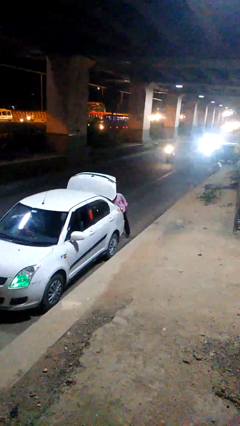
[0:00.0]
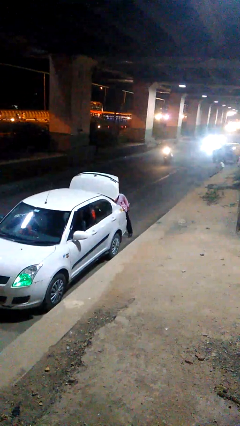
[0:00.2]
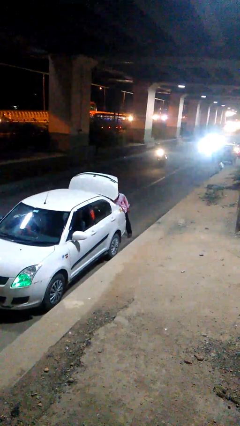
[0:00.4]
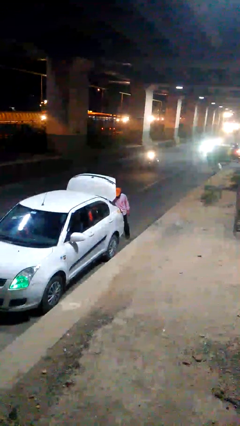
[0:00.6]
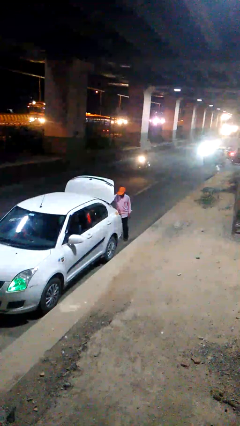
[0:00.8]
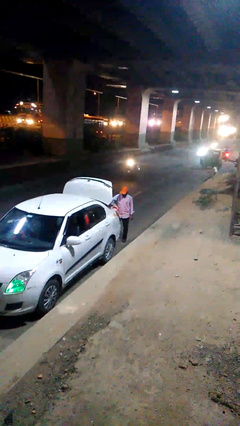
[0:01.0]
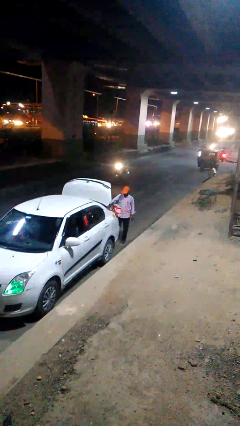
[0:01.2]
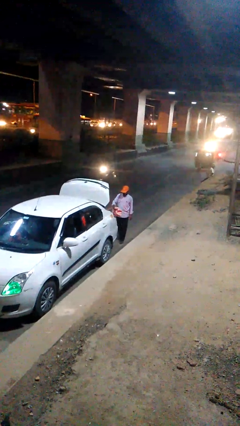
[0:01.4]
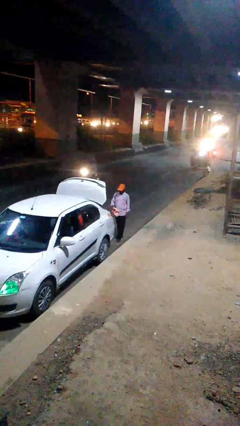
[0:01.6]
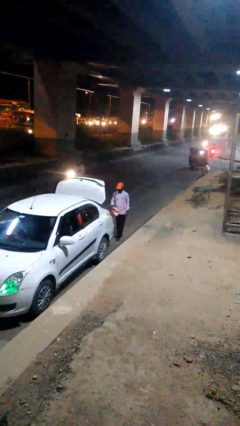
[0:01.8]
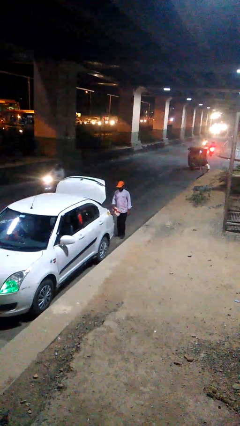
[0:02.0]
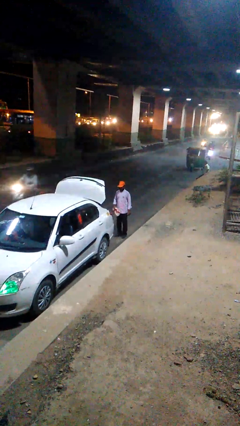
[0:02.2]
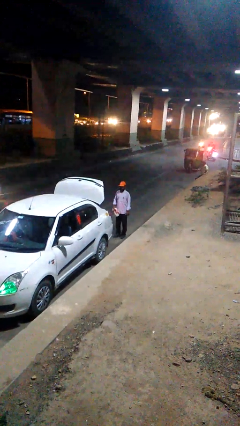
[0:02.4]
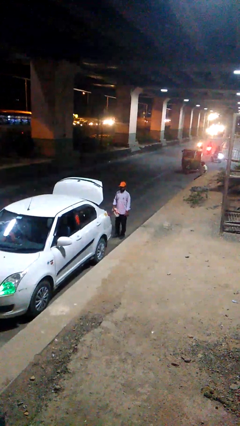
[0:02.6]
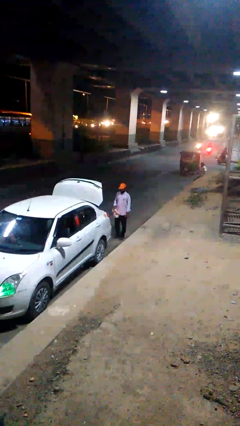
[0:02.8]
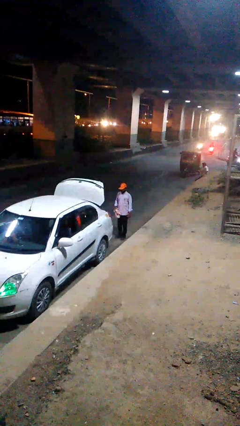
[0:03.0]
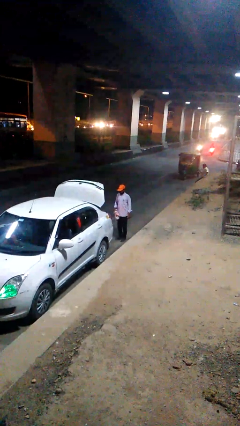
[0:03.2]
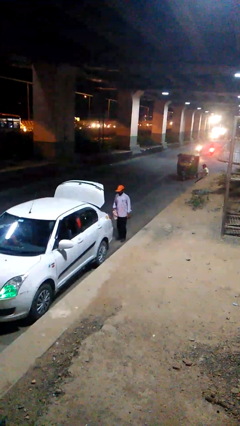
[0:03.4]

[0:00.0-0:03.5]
person unloads car

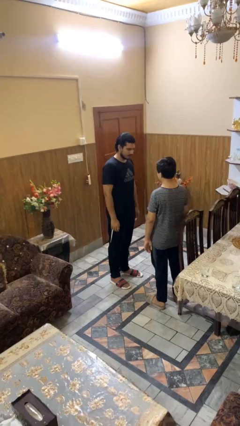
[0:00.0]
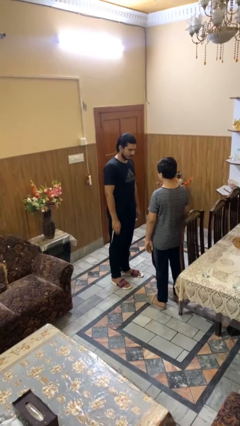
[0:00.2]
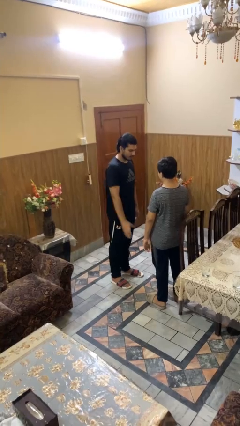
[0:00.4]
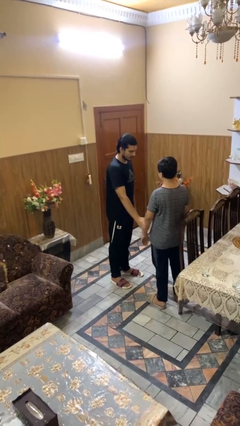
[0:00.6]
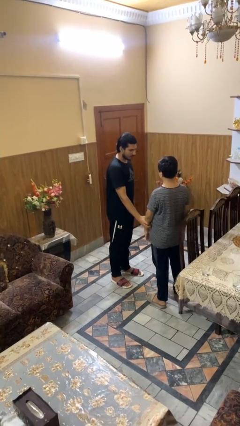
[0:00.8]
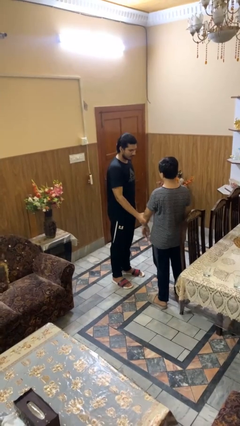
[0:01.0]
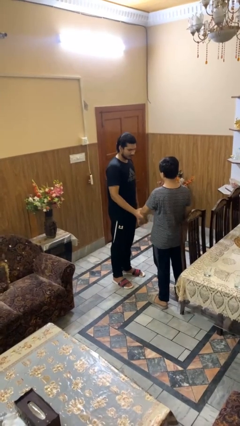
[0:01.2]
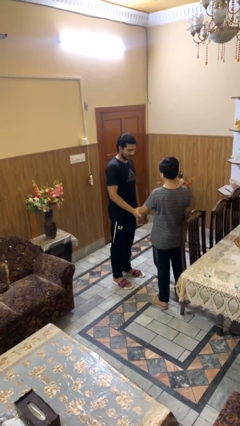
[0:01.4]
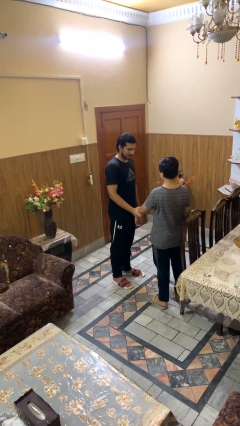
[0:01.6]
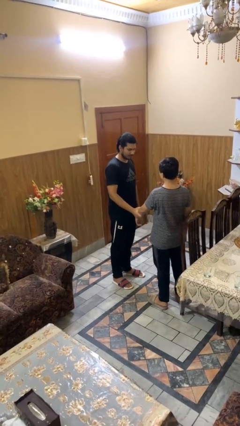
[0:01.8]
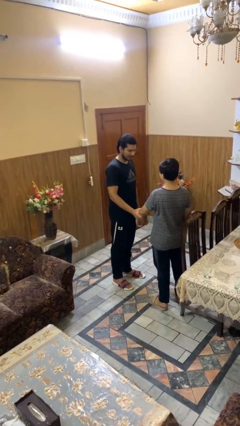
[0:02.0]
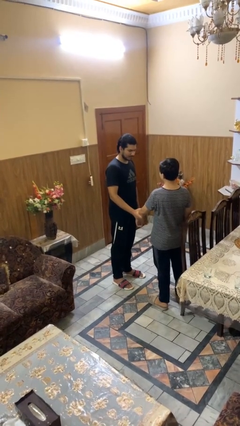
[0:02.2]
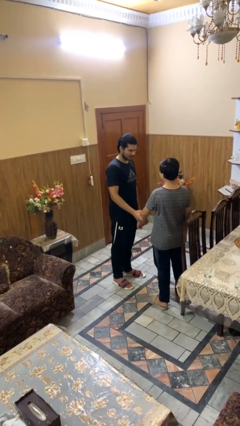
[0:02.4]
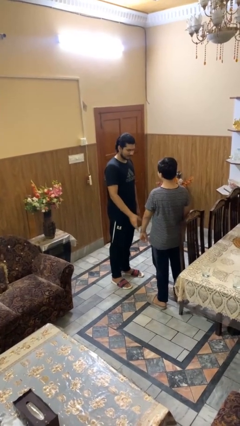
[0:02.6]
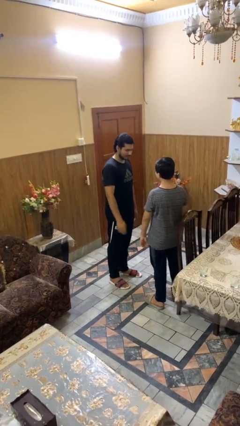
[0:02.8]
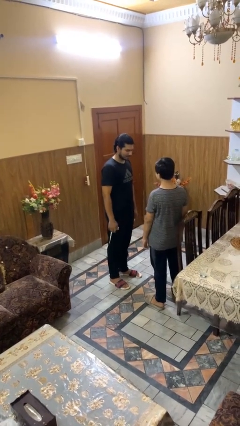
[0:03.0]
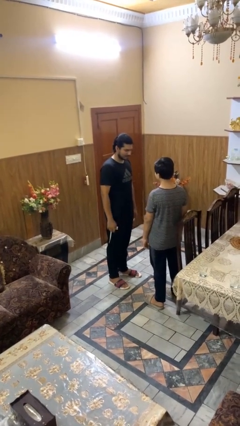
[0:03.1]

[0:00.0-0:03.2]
person grabs person by forearm

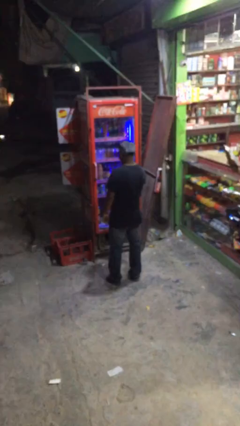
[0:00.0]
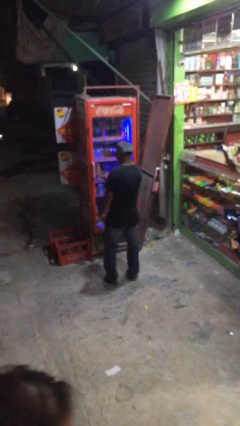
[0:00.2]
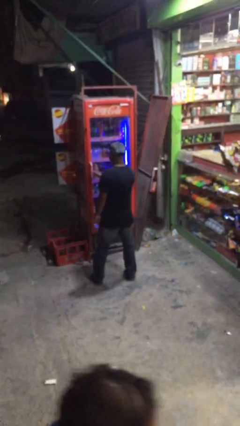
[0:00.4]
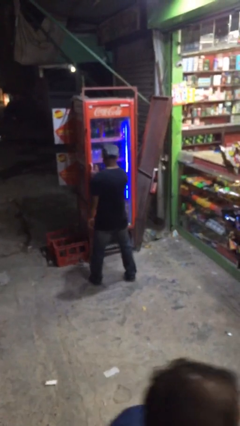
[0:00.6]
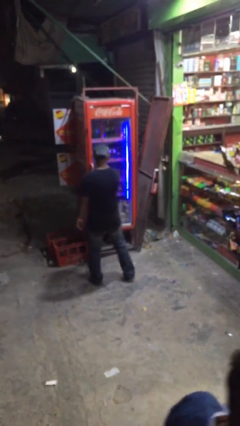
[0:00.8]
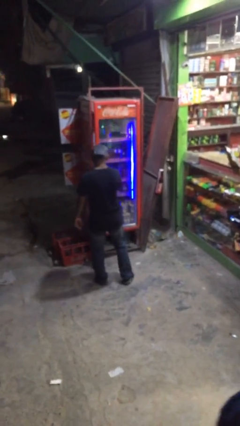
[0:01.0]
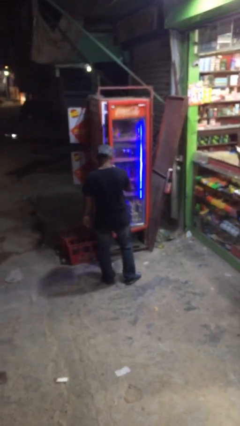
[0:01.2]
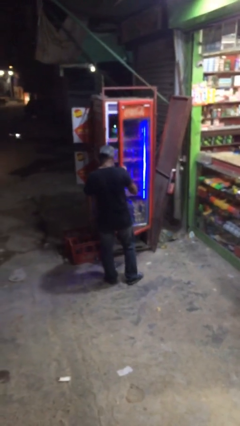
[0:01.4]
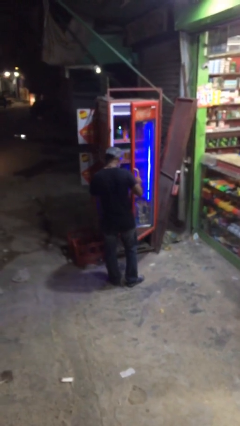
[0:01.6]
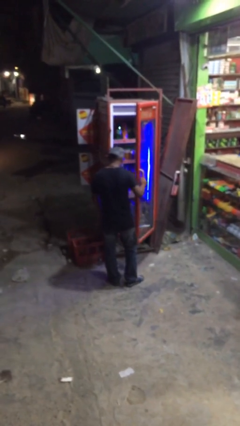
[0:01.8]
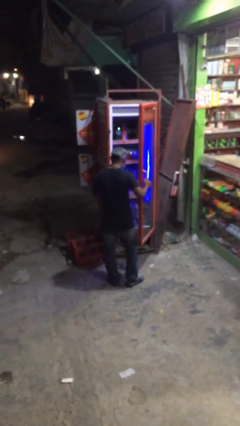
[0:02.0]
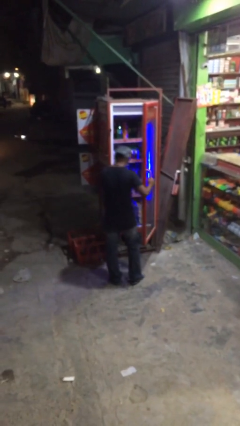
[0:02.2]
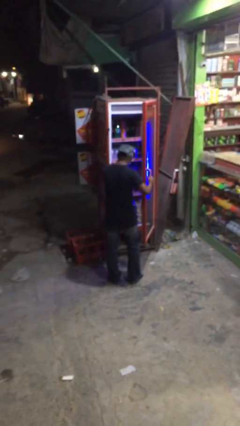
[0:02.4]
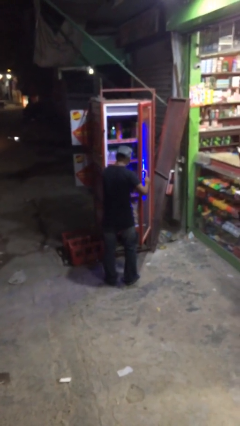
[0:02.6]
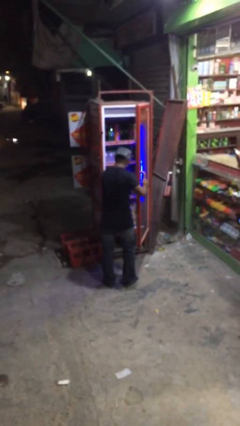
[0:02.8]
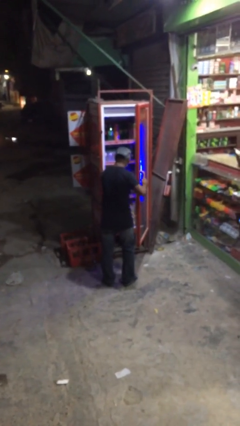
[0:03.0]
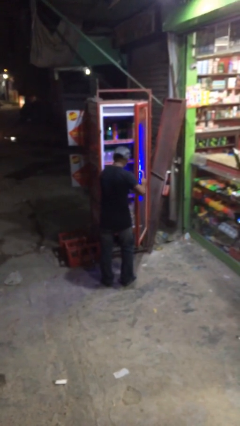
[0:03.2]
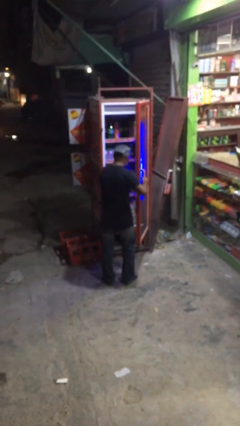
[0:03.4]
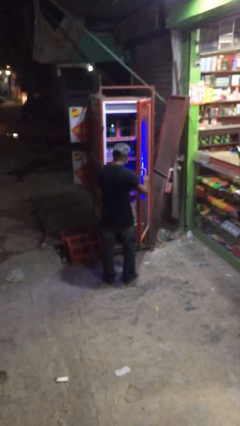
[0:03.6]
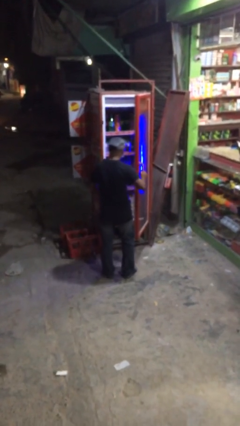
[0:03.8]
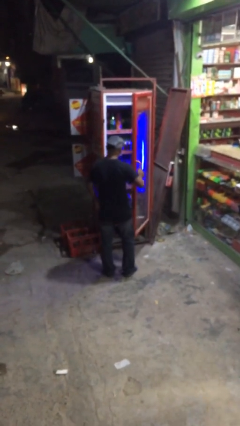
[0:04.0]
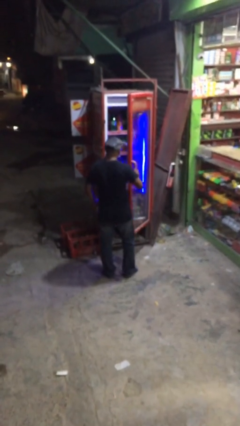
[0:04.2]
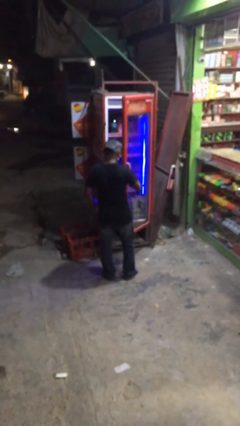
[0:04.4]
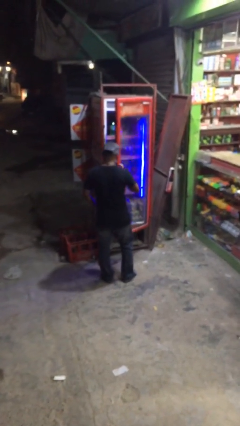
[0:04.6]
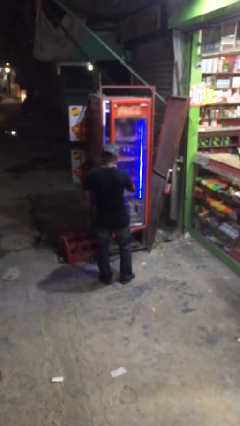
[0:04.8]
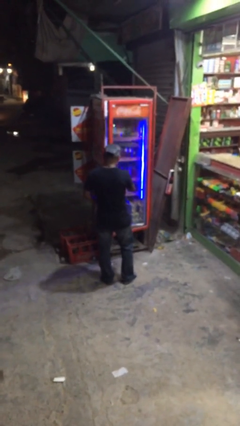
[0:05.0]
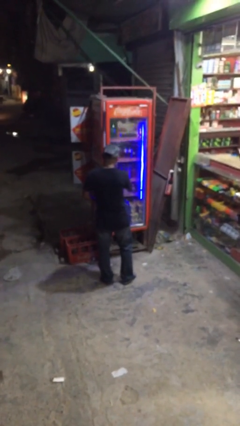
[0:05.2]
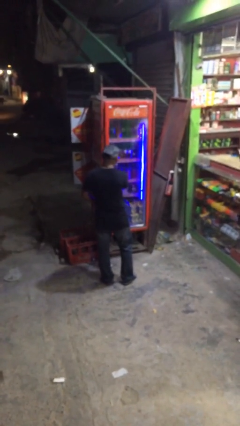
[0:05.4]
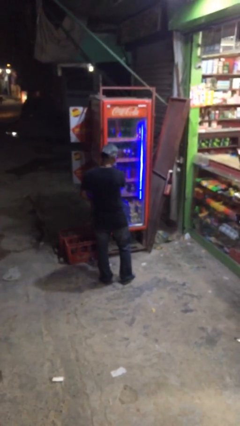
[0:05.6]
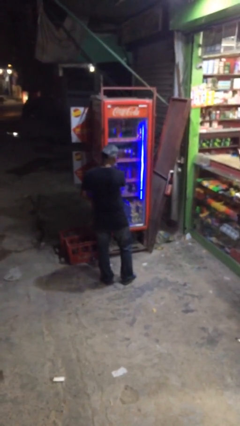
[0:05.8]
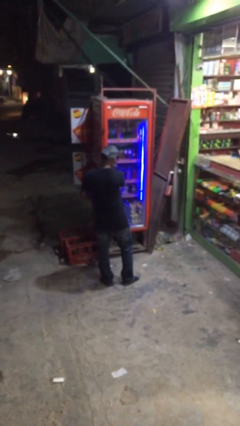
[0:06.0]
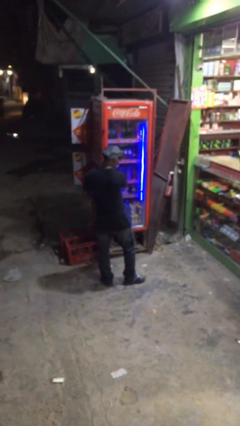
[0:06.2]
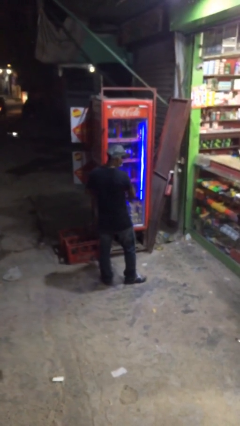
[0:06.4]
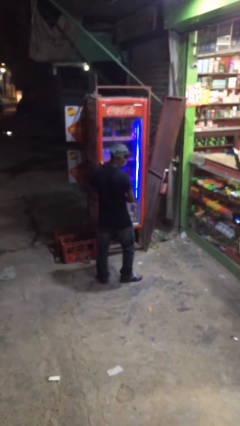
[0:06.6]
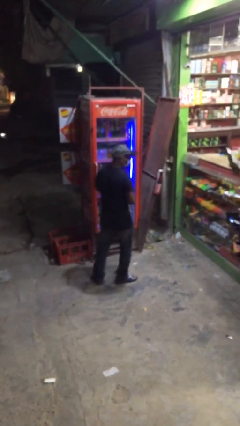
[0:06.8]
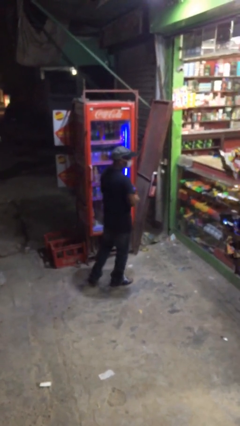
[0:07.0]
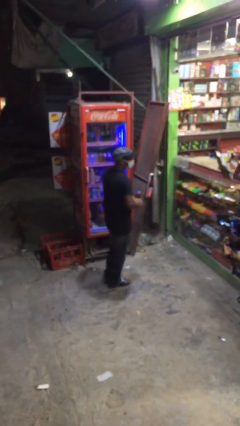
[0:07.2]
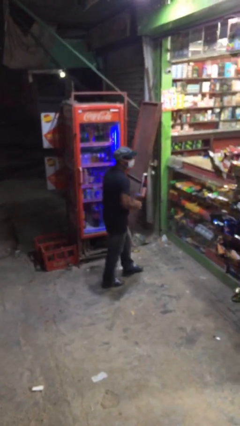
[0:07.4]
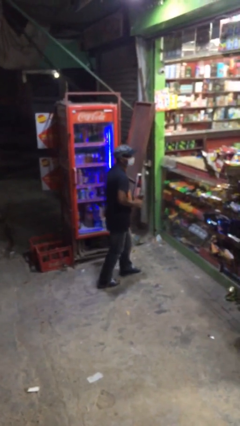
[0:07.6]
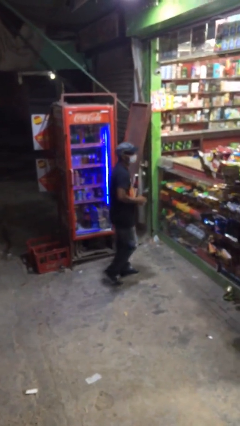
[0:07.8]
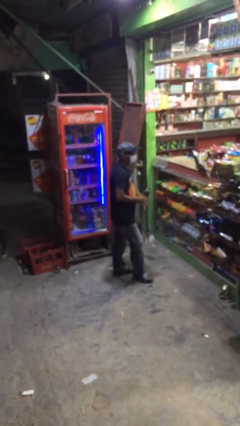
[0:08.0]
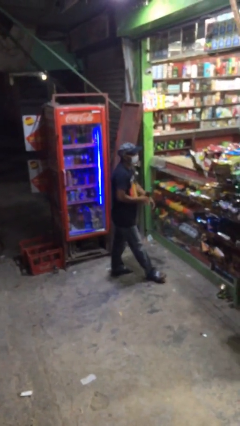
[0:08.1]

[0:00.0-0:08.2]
person purchases from machine

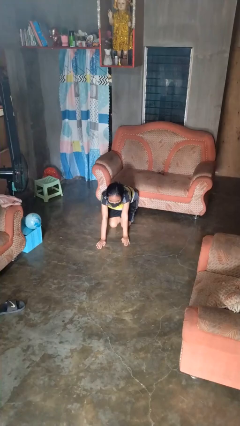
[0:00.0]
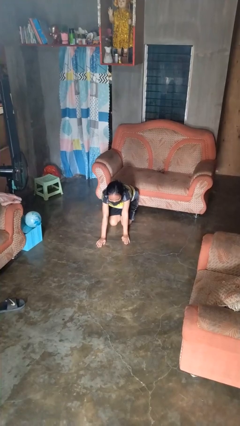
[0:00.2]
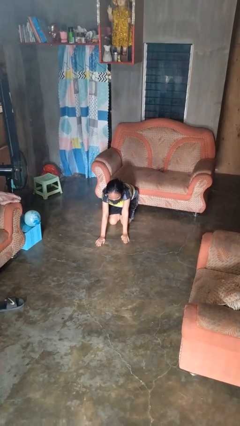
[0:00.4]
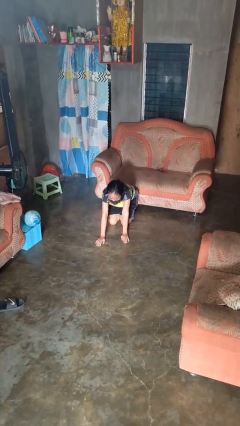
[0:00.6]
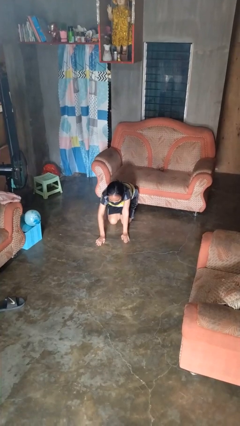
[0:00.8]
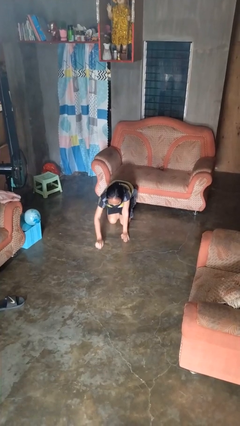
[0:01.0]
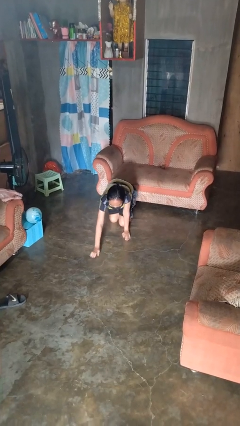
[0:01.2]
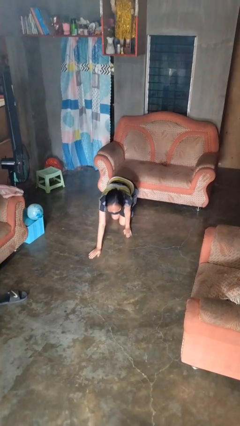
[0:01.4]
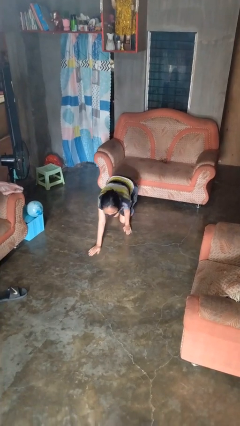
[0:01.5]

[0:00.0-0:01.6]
person crawls

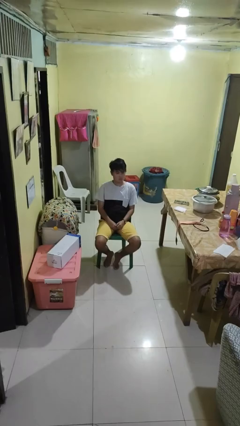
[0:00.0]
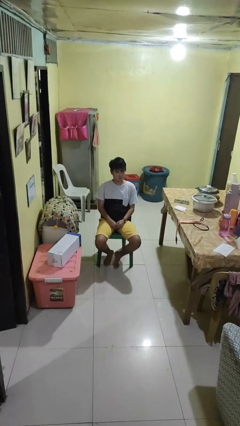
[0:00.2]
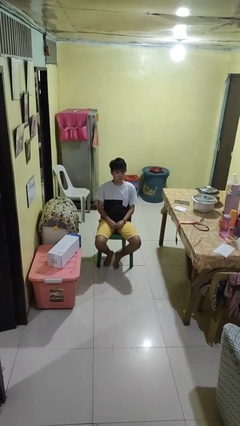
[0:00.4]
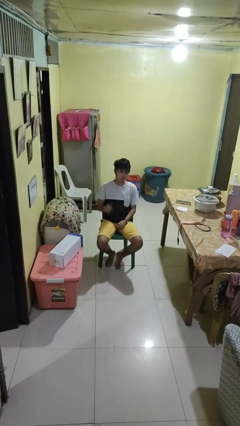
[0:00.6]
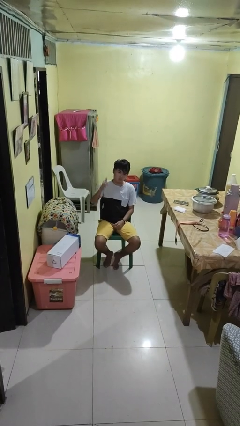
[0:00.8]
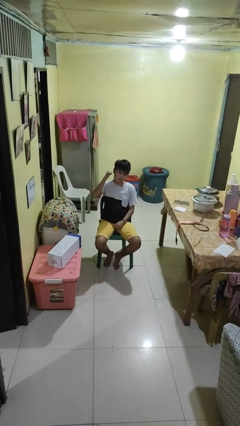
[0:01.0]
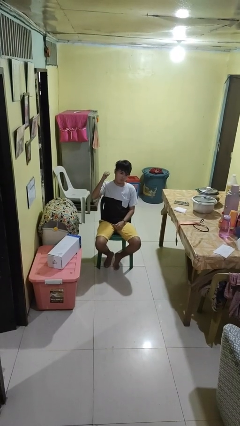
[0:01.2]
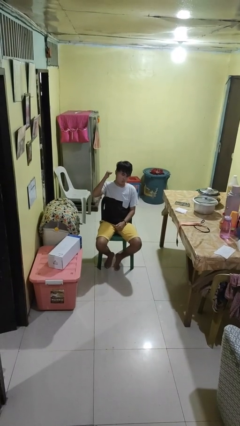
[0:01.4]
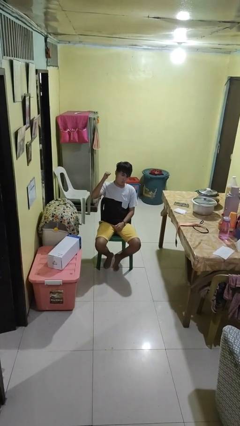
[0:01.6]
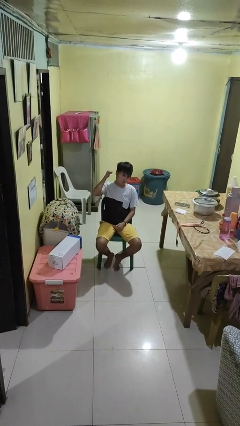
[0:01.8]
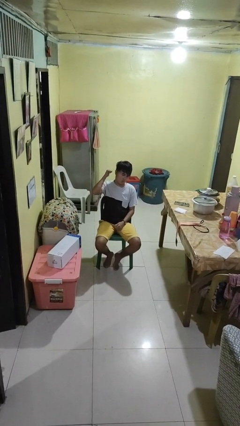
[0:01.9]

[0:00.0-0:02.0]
person gestures behind me
